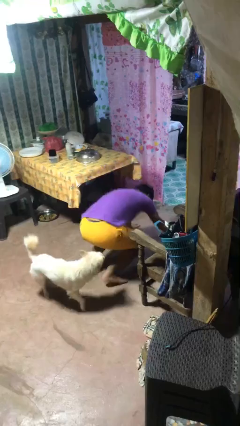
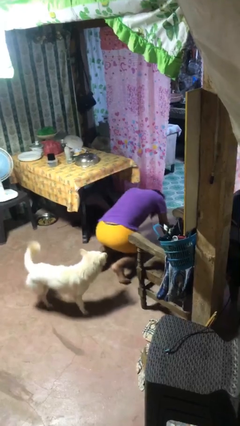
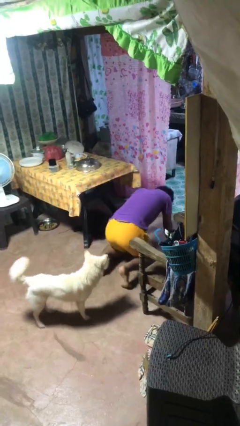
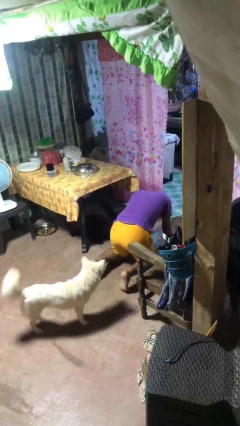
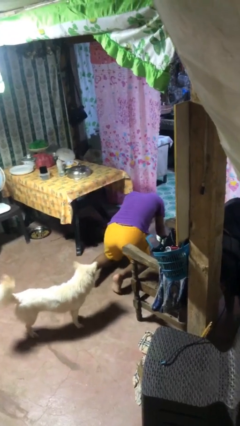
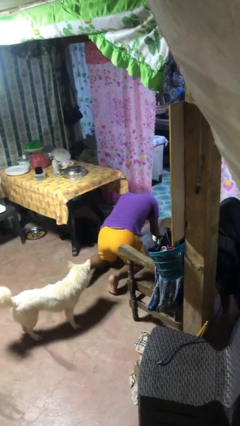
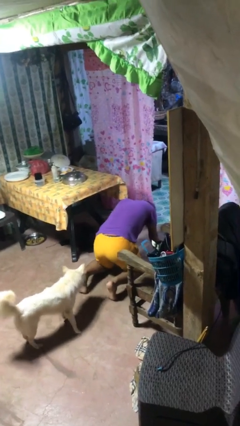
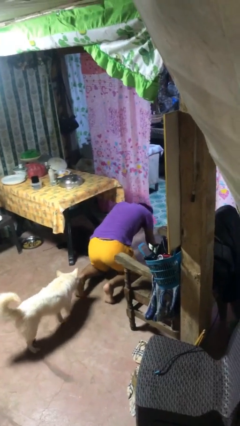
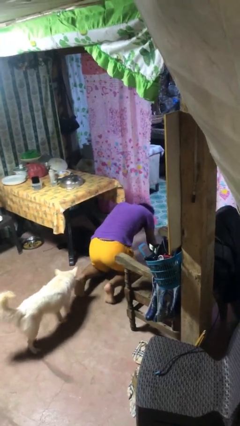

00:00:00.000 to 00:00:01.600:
person lies down on floor

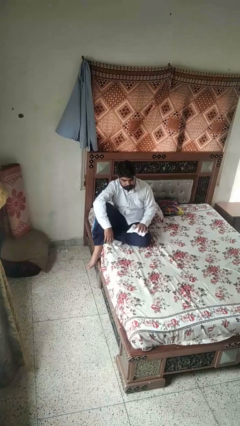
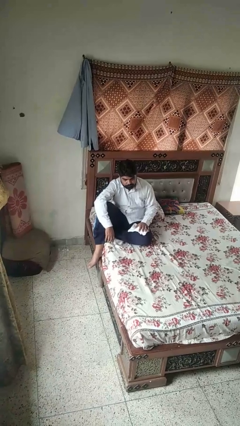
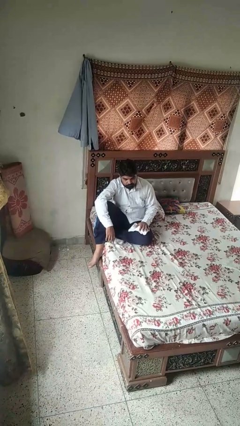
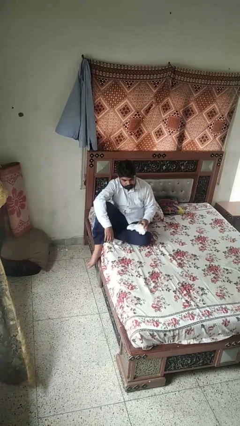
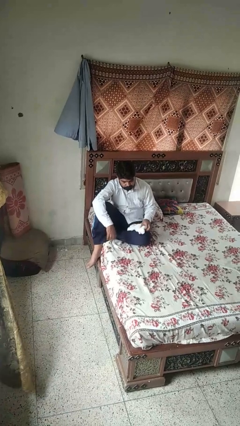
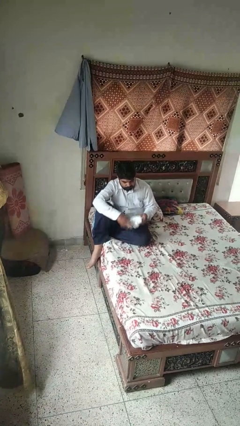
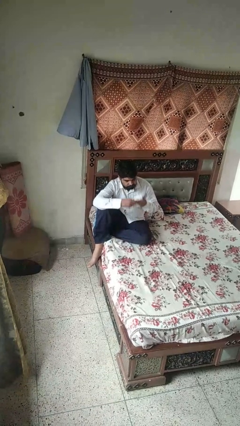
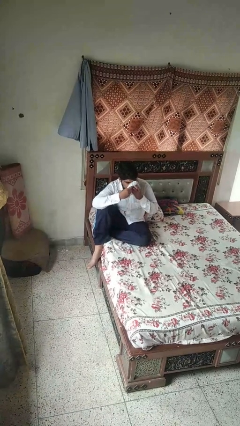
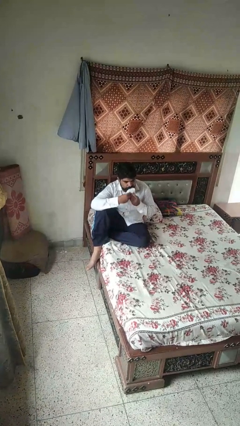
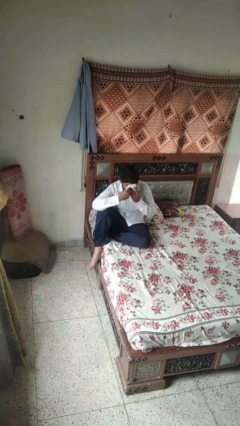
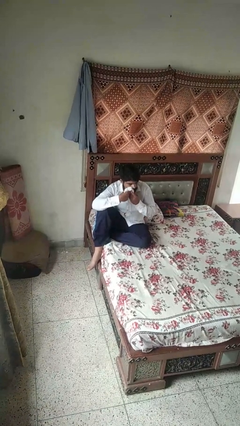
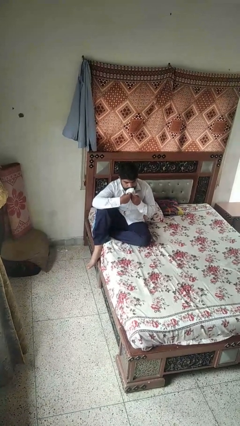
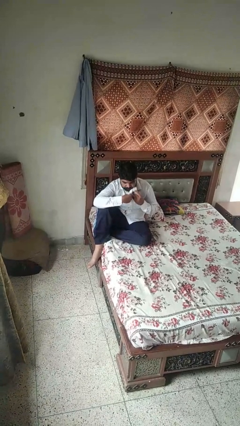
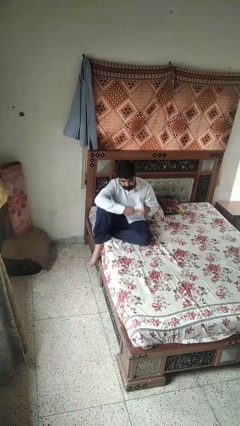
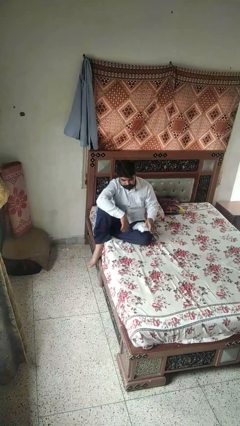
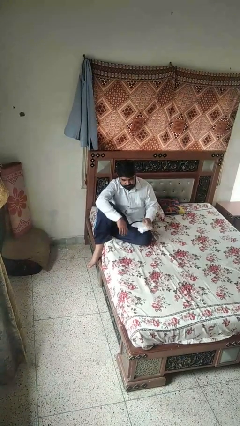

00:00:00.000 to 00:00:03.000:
person wipes mouth with napkin

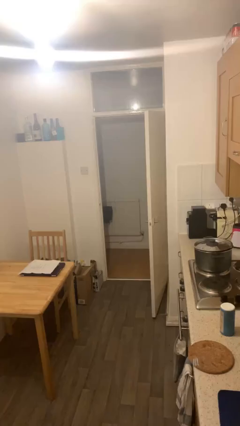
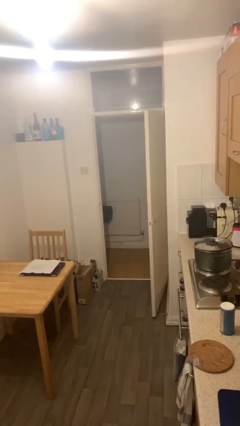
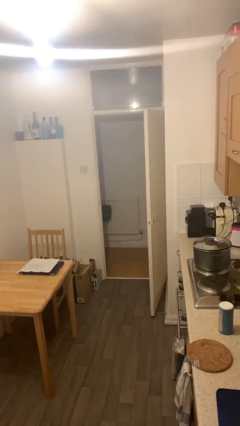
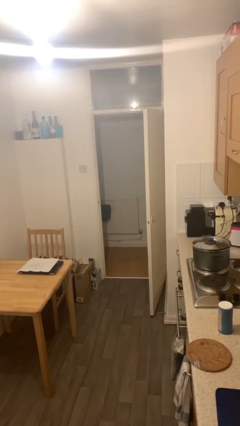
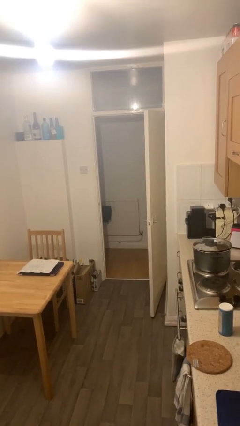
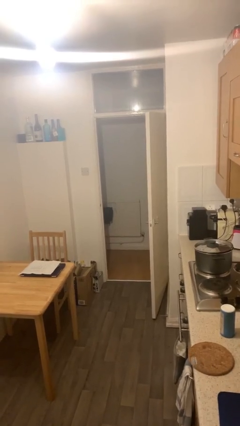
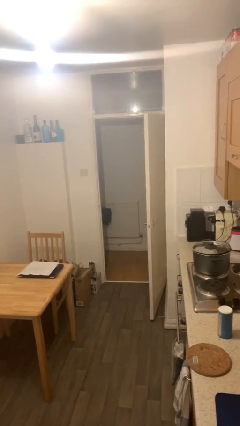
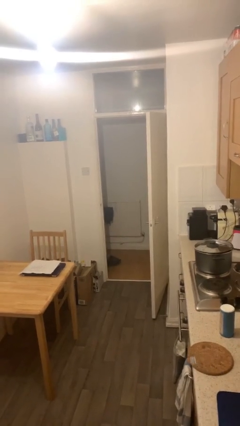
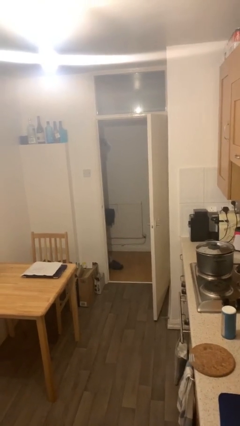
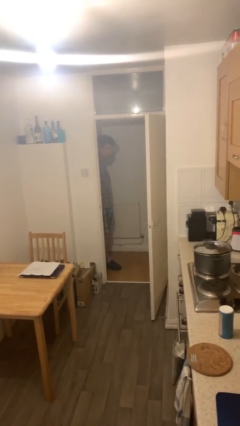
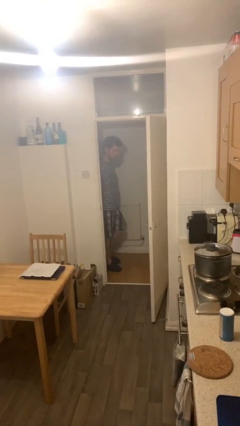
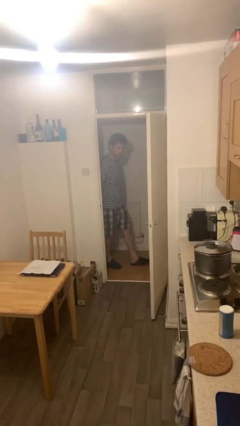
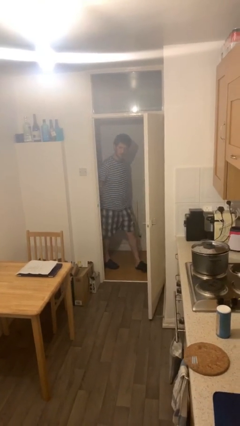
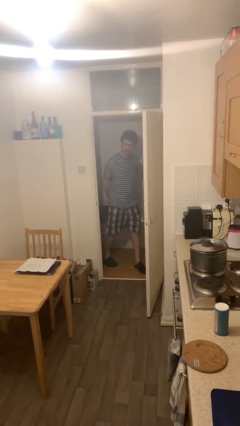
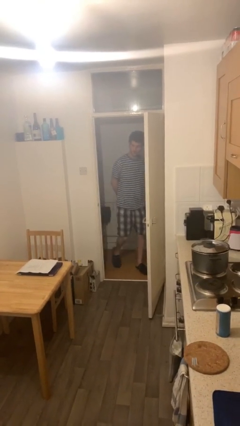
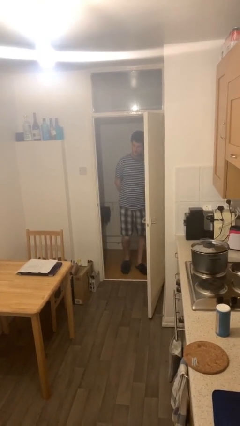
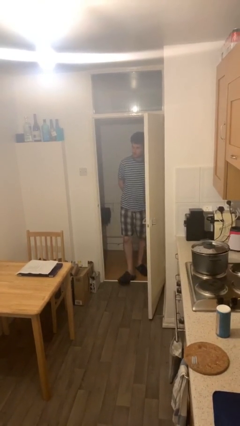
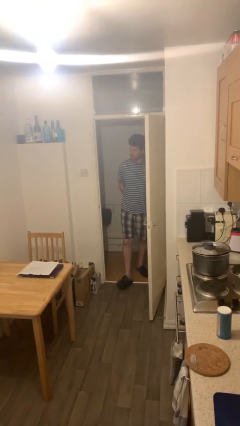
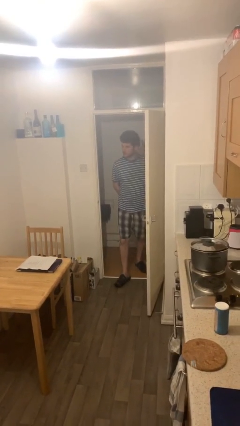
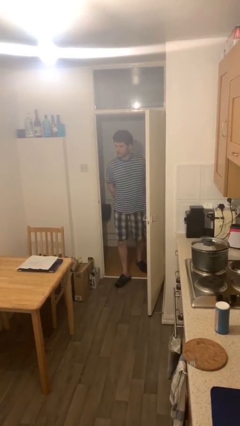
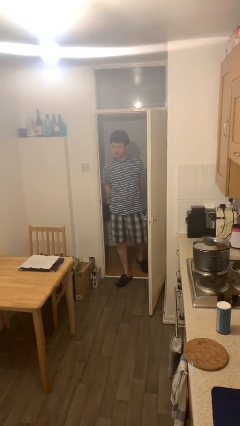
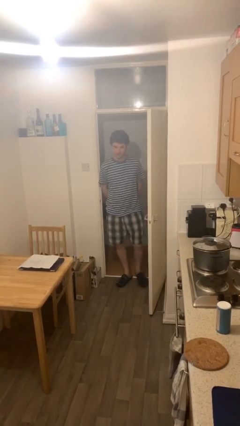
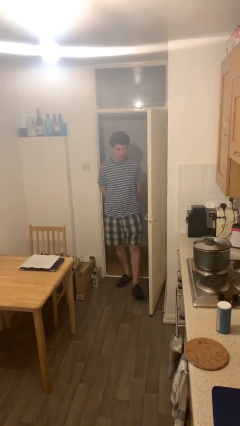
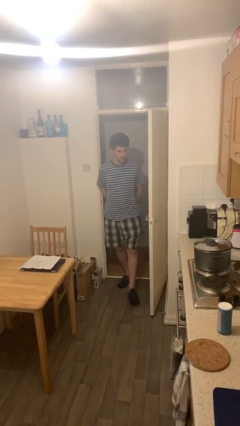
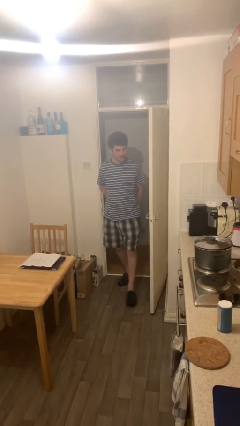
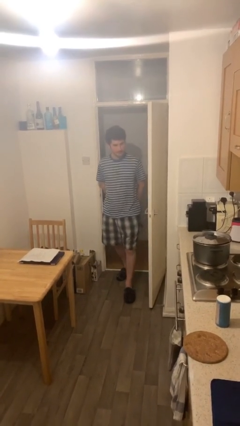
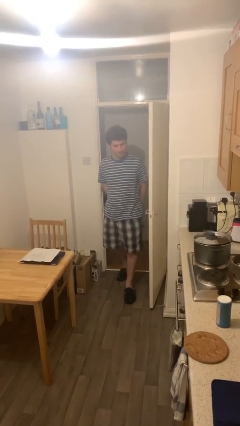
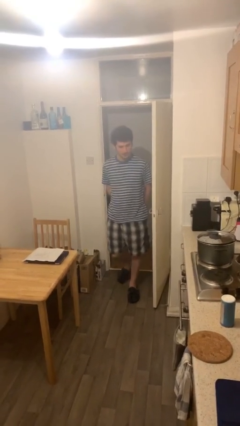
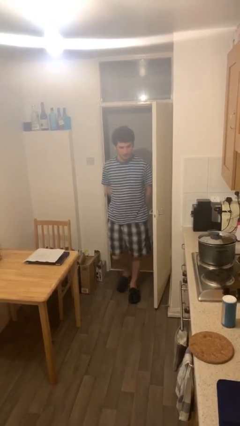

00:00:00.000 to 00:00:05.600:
person enters scene through structure

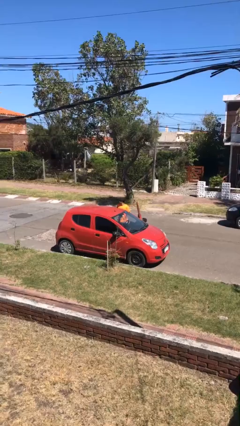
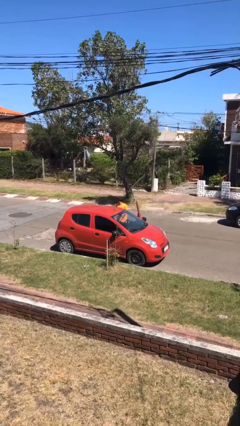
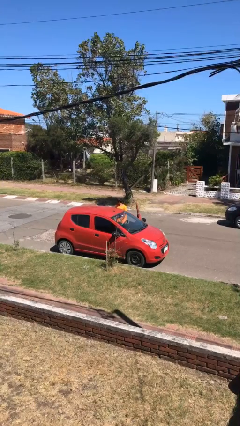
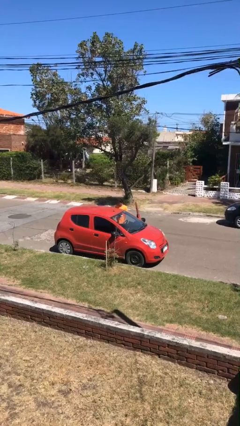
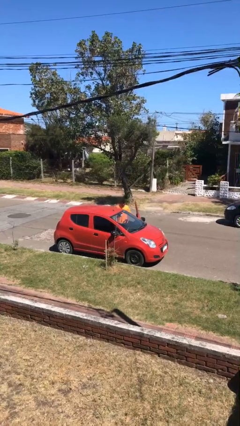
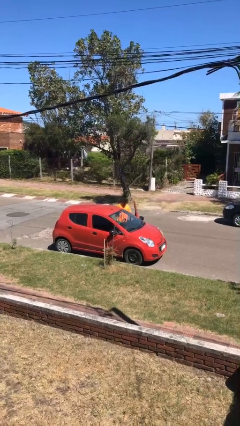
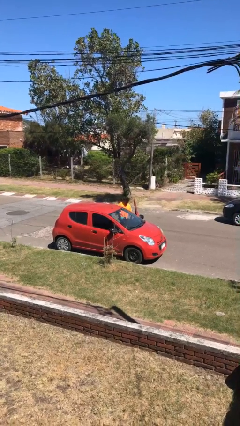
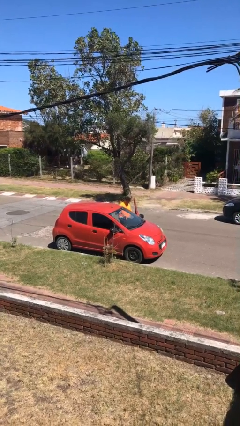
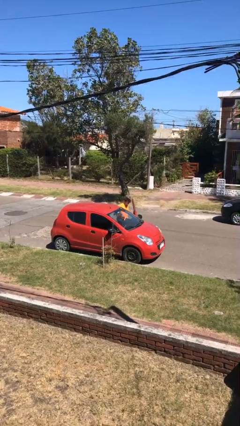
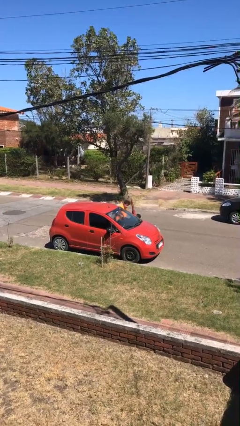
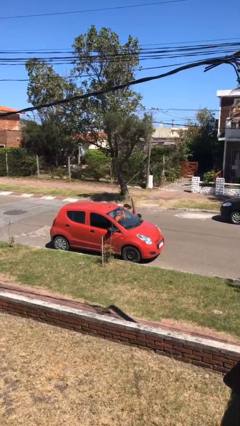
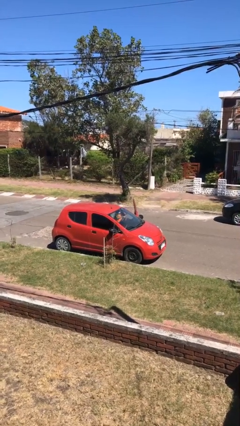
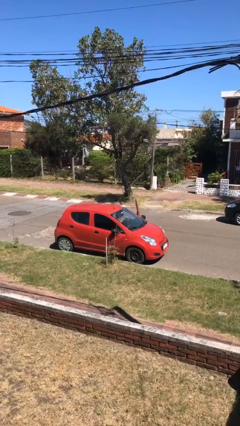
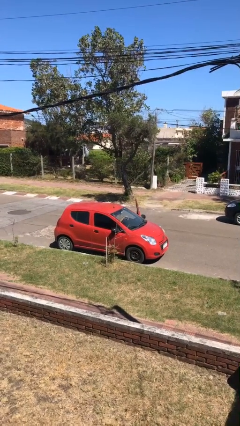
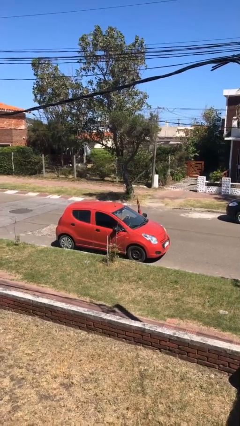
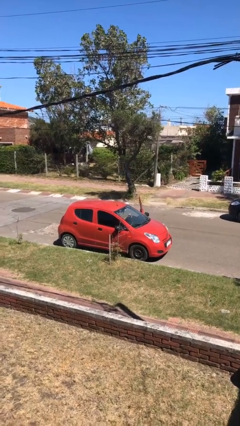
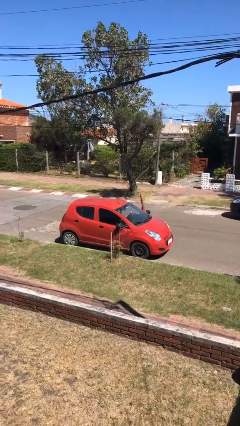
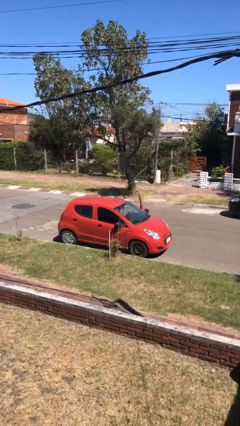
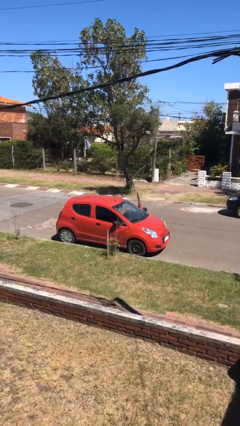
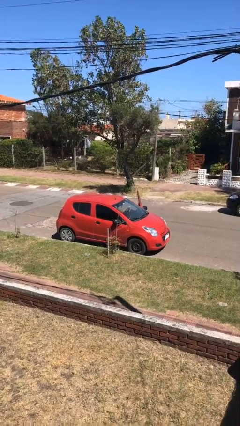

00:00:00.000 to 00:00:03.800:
person enters car

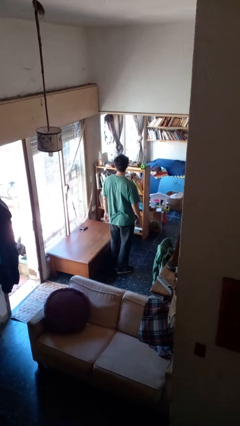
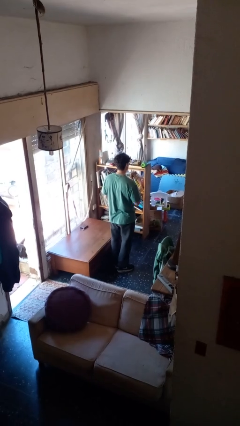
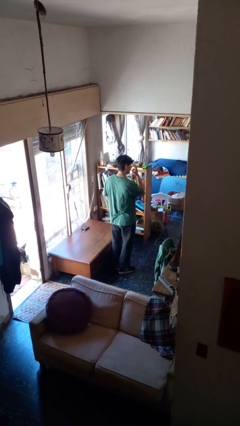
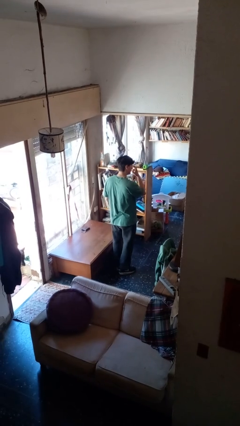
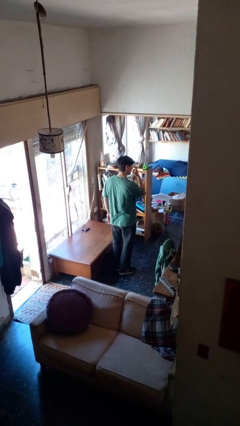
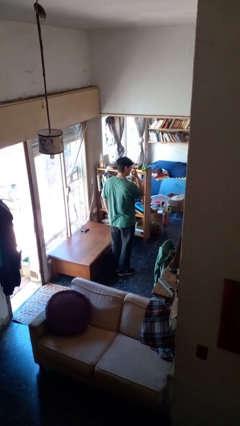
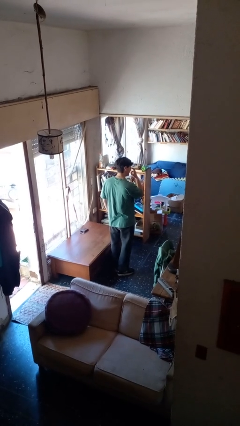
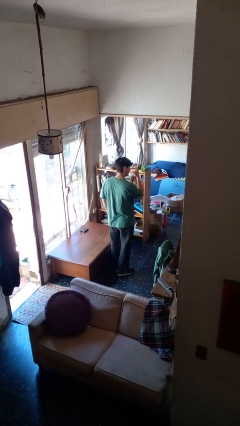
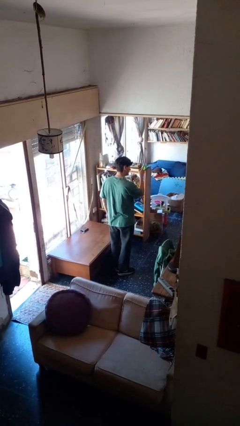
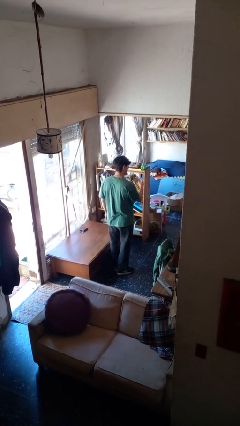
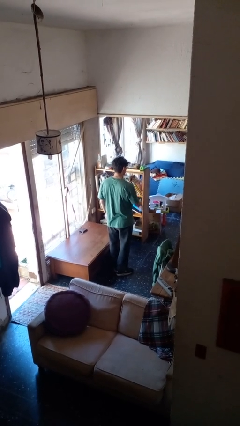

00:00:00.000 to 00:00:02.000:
person gestures watch closely

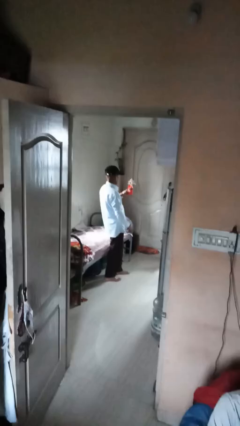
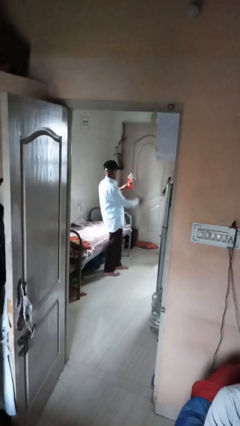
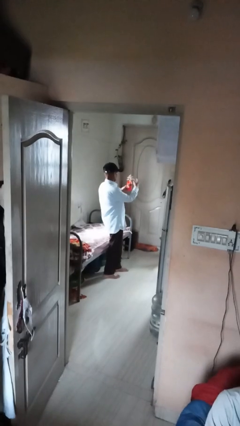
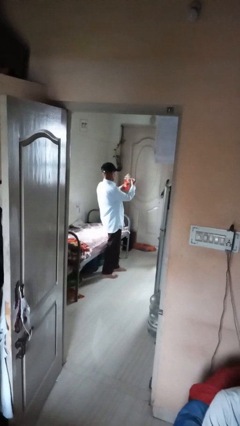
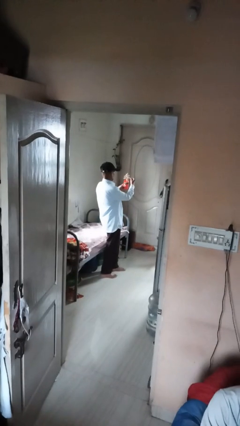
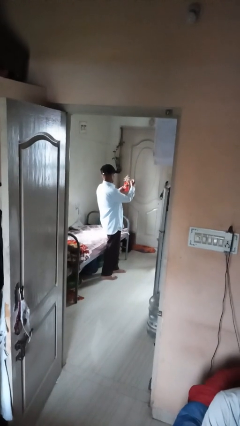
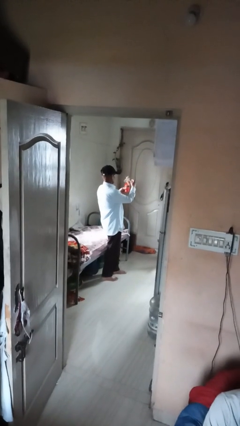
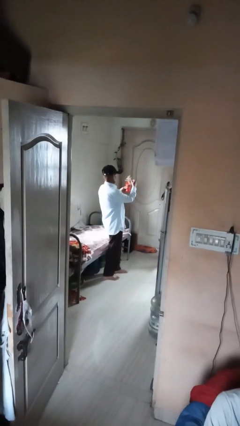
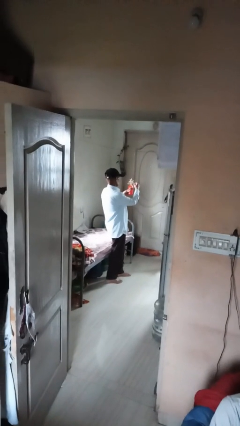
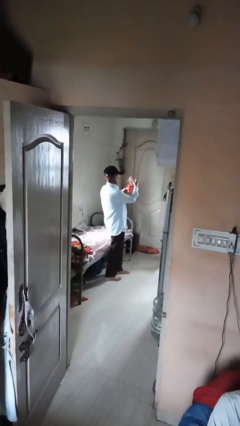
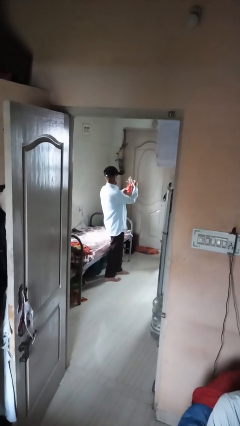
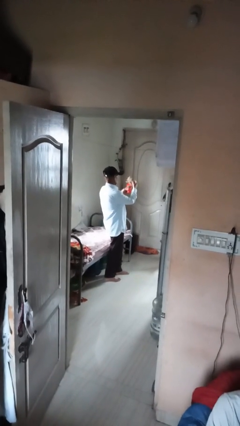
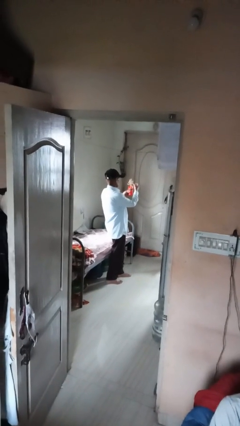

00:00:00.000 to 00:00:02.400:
person arranges flowers in vase
